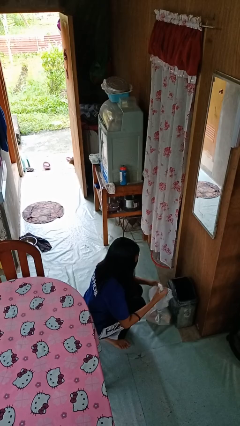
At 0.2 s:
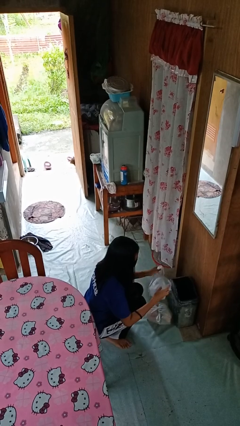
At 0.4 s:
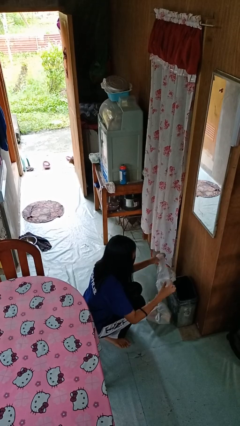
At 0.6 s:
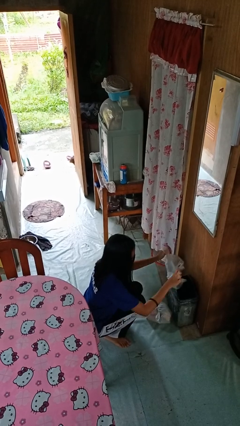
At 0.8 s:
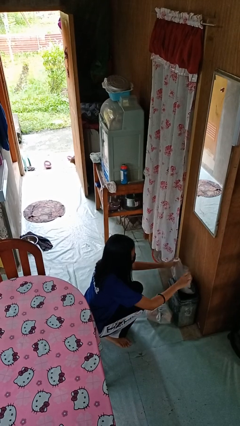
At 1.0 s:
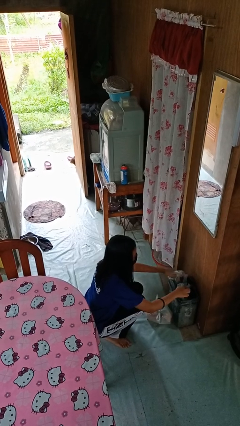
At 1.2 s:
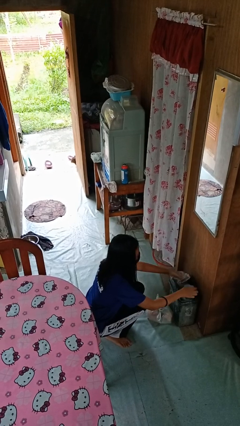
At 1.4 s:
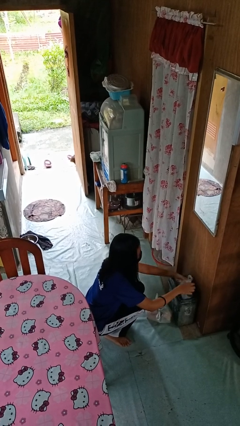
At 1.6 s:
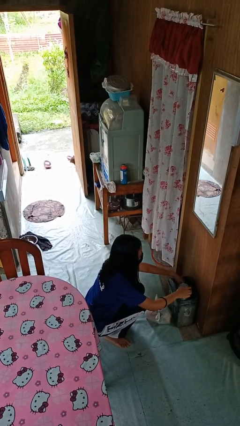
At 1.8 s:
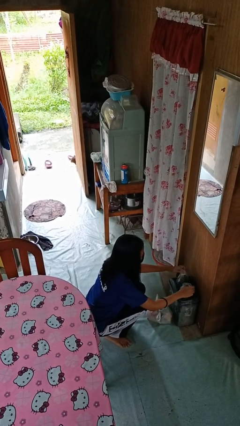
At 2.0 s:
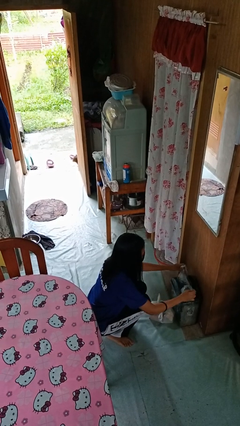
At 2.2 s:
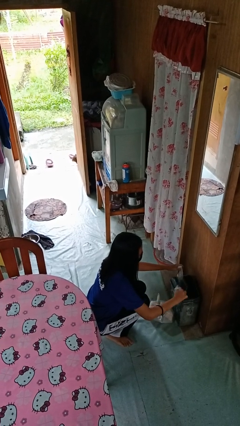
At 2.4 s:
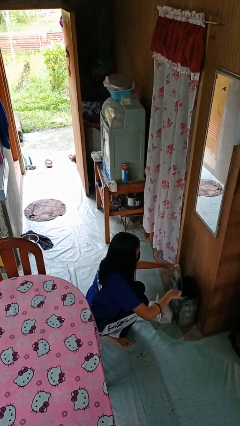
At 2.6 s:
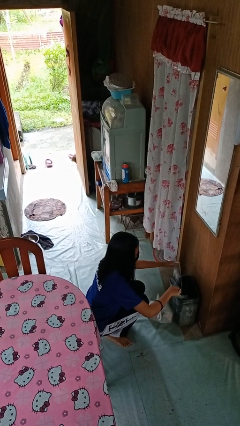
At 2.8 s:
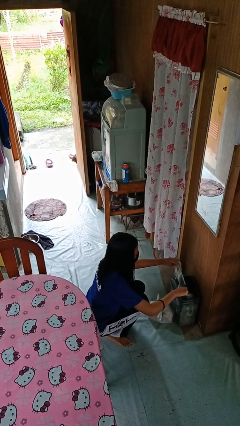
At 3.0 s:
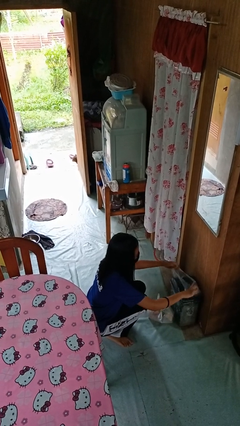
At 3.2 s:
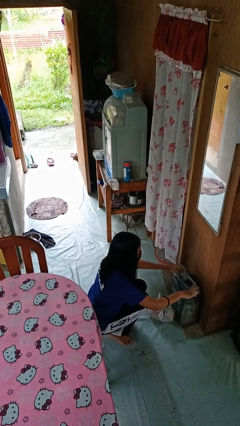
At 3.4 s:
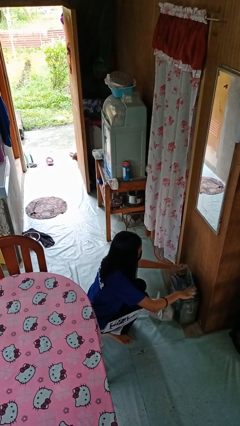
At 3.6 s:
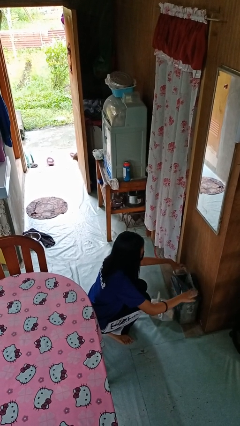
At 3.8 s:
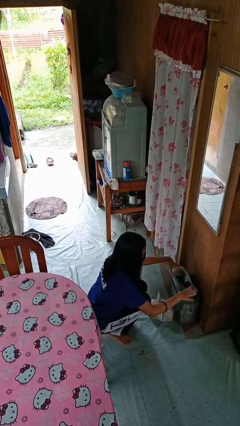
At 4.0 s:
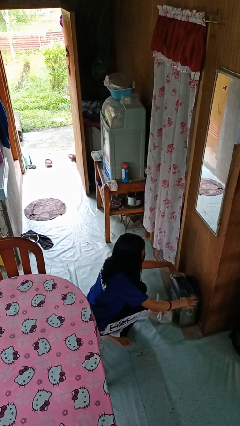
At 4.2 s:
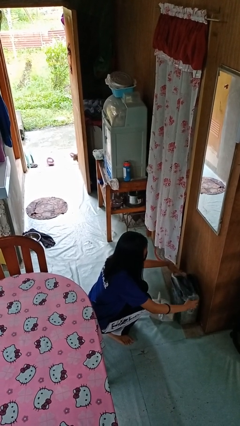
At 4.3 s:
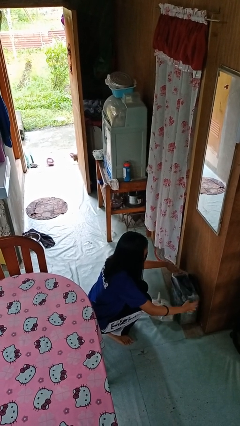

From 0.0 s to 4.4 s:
person inserts trashbag into trashcan

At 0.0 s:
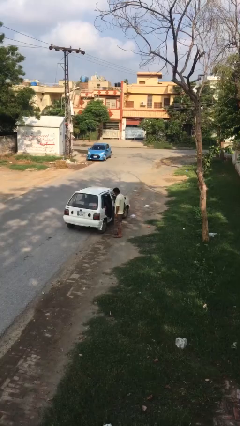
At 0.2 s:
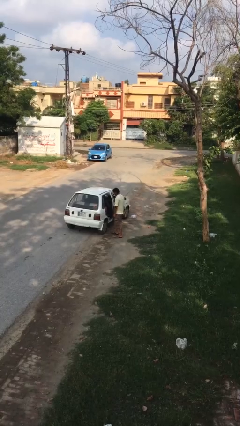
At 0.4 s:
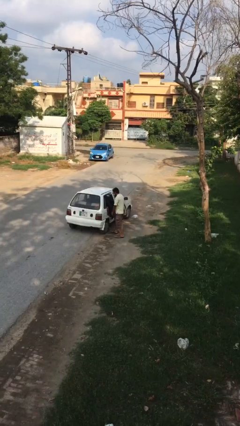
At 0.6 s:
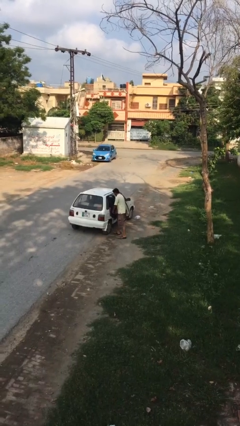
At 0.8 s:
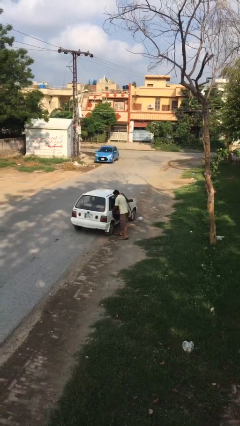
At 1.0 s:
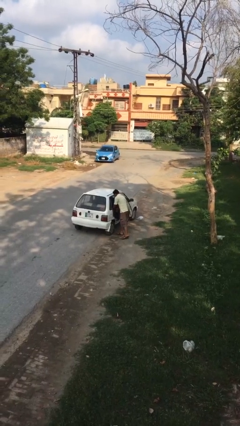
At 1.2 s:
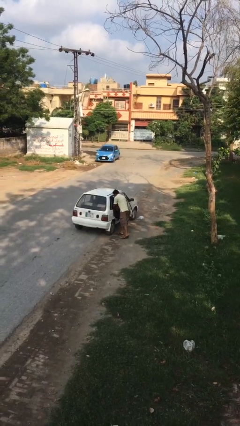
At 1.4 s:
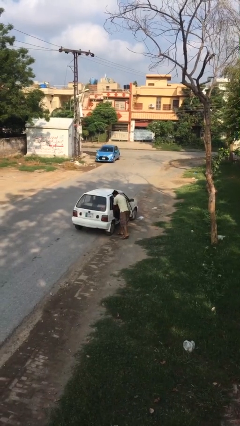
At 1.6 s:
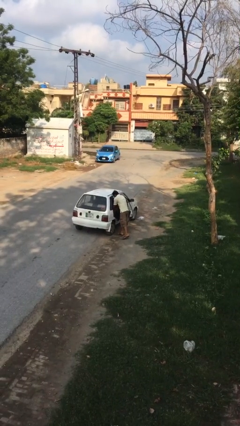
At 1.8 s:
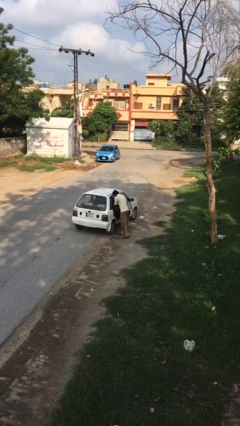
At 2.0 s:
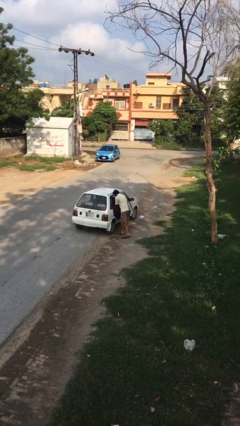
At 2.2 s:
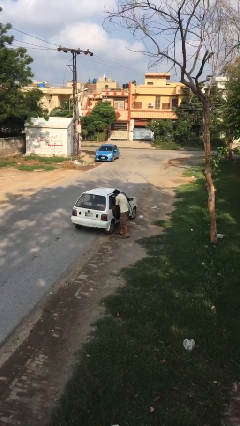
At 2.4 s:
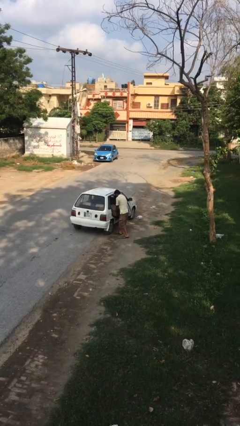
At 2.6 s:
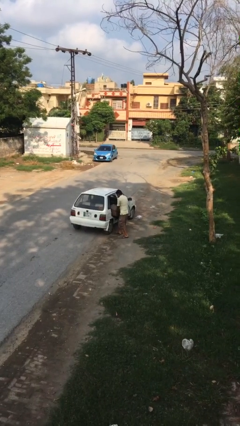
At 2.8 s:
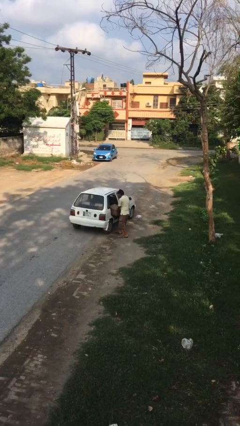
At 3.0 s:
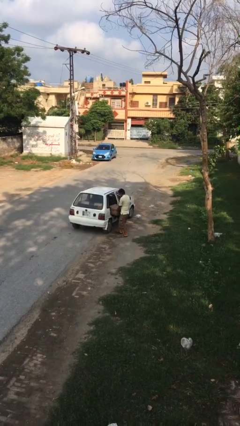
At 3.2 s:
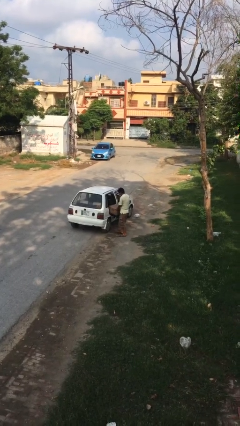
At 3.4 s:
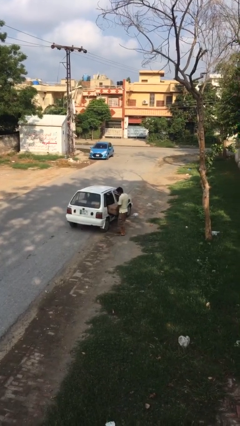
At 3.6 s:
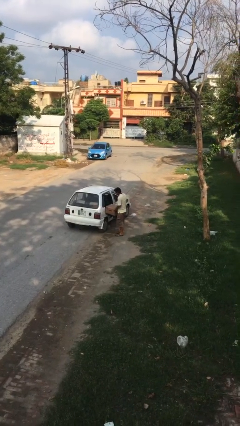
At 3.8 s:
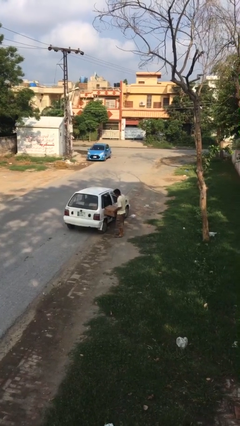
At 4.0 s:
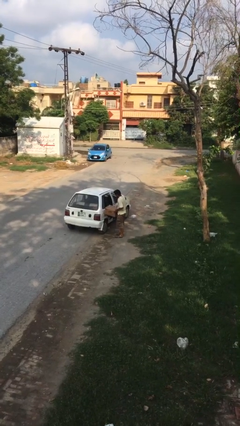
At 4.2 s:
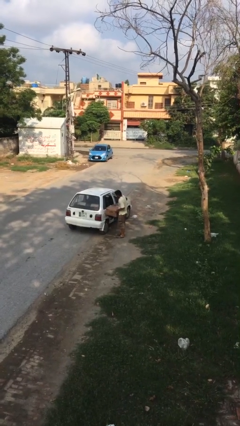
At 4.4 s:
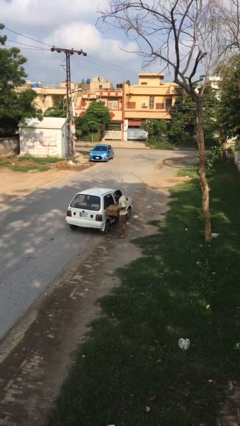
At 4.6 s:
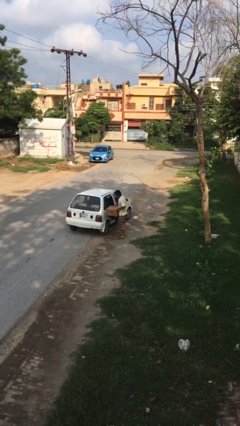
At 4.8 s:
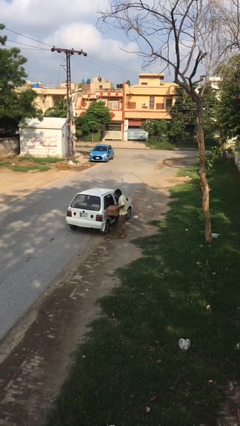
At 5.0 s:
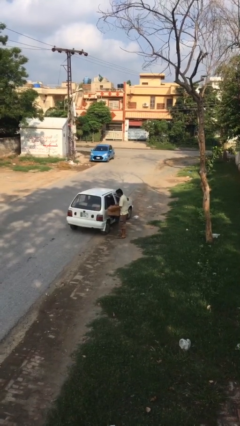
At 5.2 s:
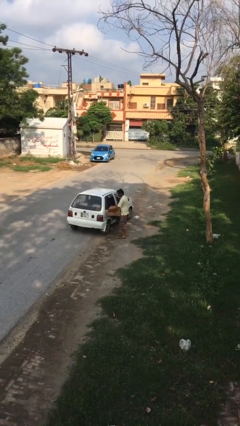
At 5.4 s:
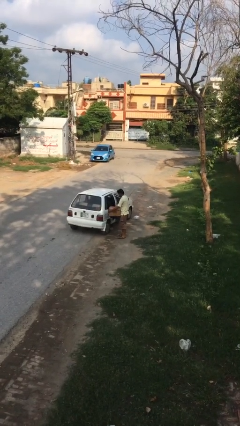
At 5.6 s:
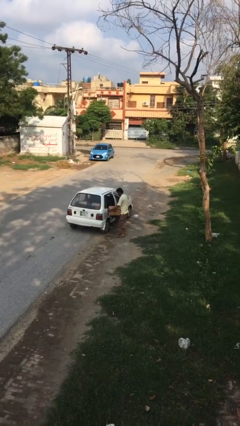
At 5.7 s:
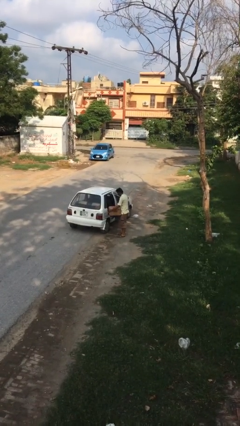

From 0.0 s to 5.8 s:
person unloads car

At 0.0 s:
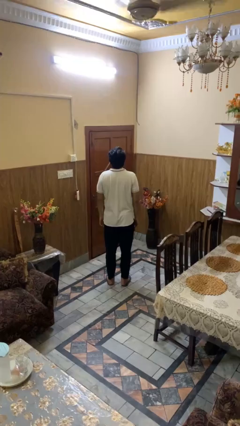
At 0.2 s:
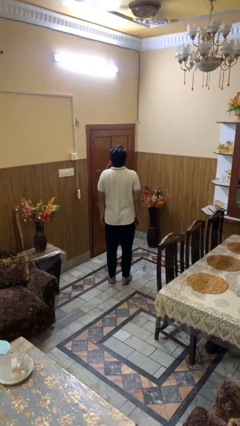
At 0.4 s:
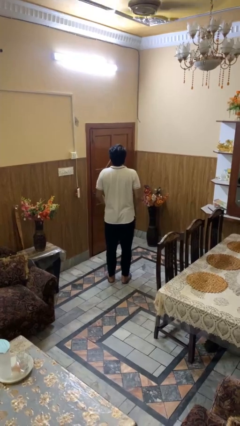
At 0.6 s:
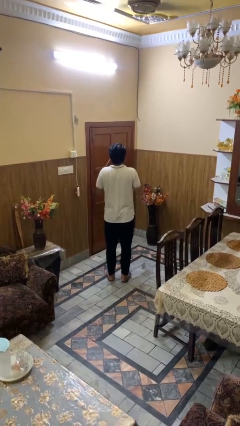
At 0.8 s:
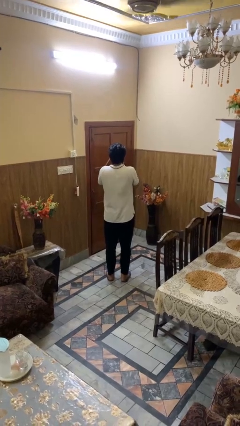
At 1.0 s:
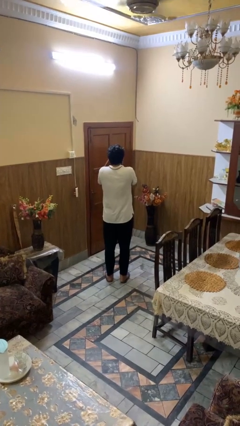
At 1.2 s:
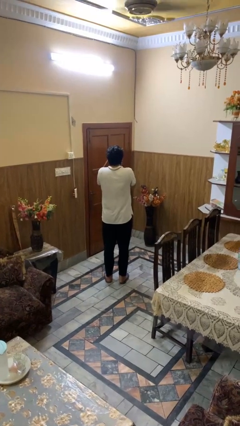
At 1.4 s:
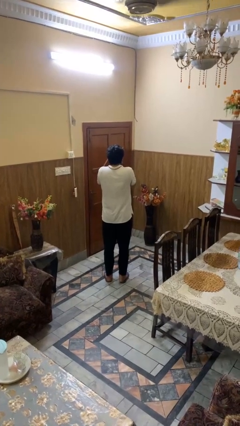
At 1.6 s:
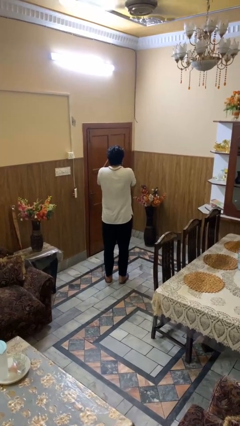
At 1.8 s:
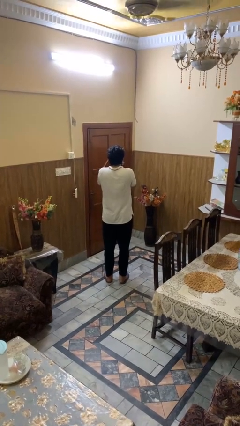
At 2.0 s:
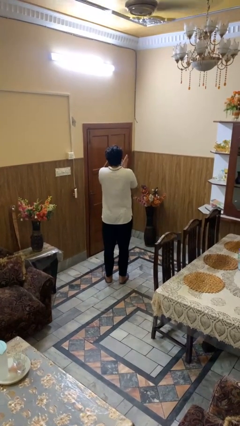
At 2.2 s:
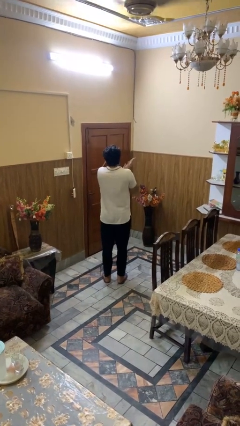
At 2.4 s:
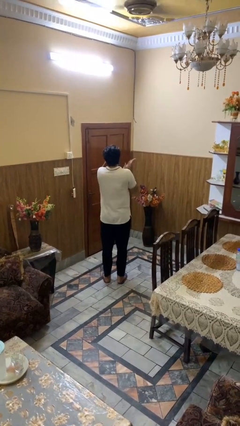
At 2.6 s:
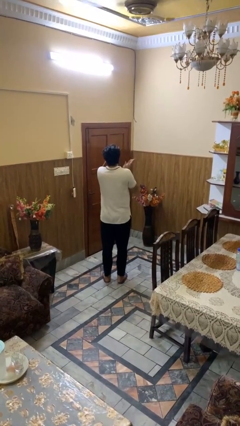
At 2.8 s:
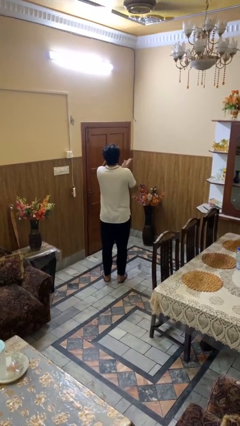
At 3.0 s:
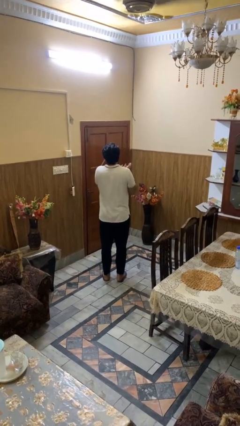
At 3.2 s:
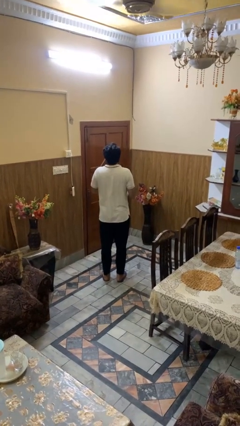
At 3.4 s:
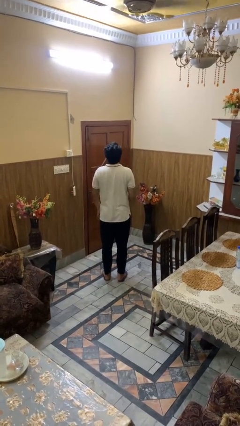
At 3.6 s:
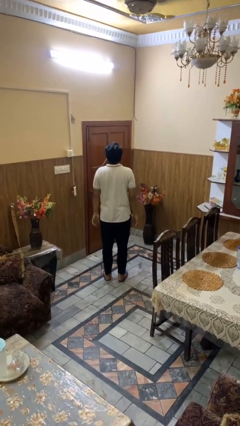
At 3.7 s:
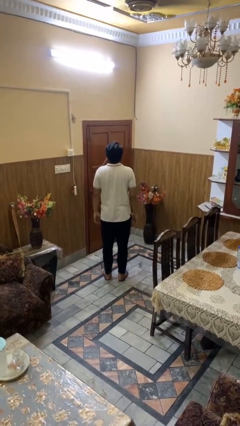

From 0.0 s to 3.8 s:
person blows into hands

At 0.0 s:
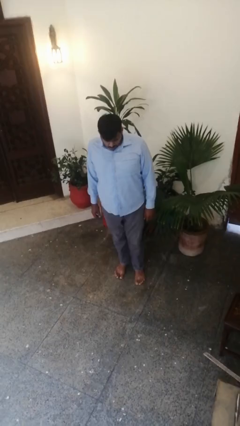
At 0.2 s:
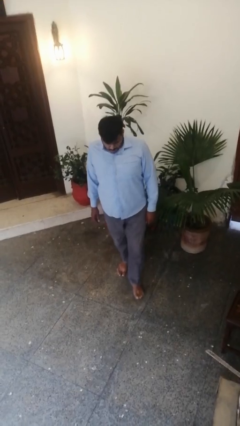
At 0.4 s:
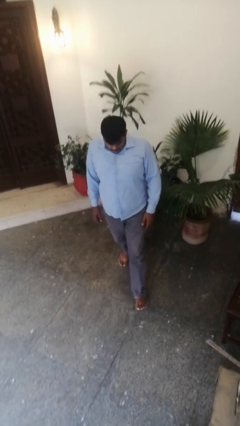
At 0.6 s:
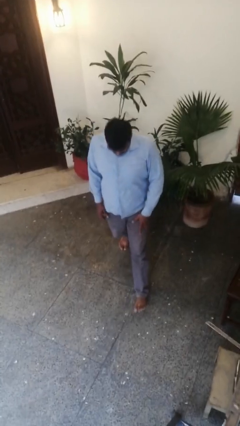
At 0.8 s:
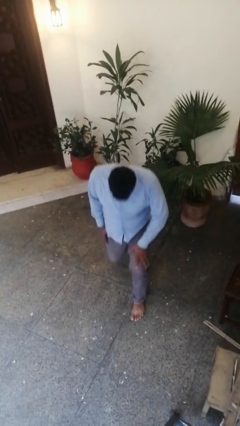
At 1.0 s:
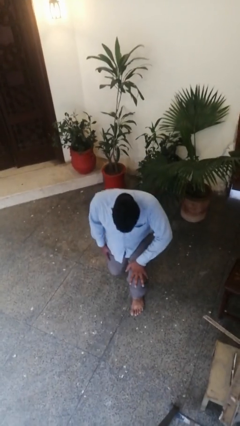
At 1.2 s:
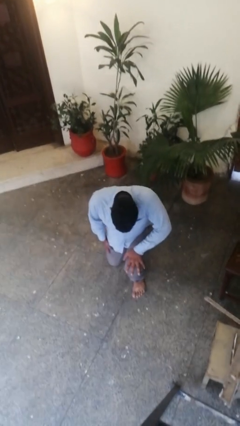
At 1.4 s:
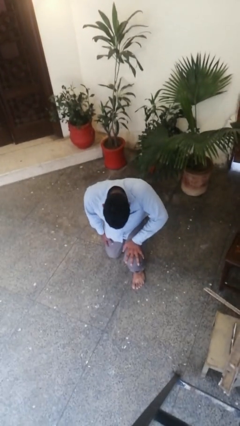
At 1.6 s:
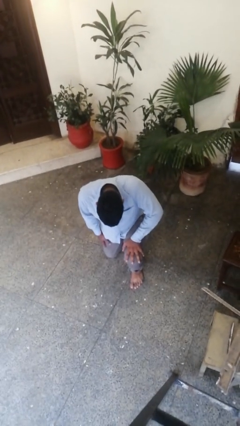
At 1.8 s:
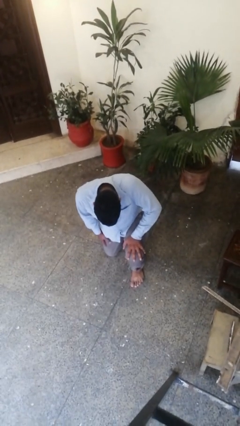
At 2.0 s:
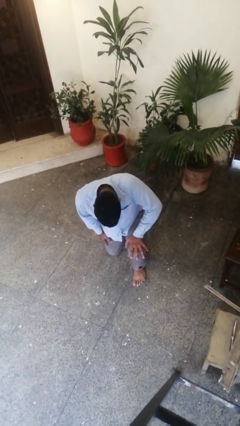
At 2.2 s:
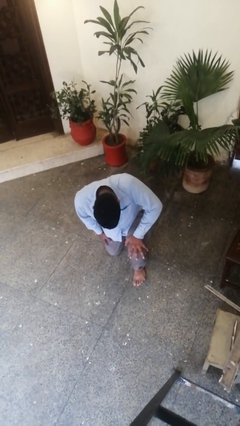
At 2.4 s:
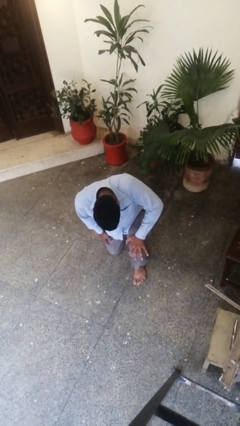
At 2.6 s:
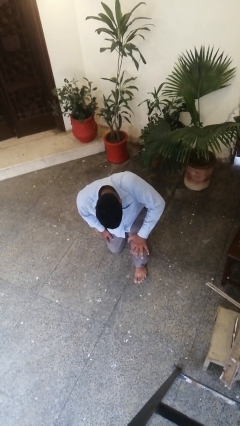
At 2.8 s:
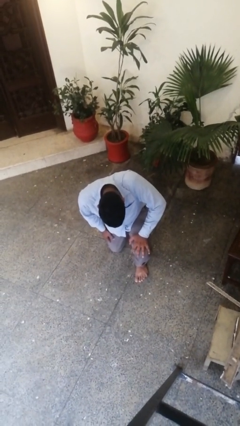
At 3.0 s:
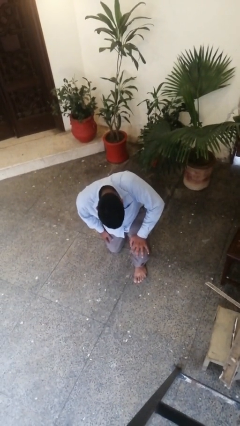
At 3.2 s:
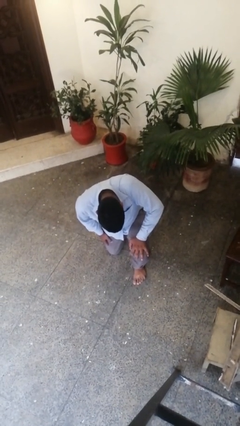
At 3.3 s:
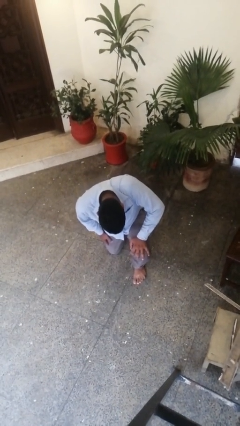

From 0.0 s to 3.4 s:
person kneels
